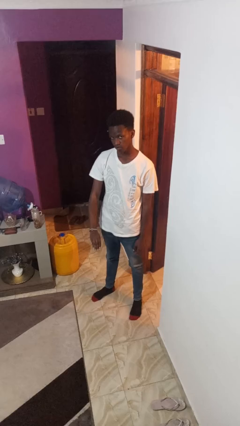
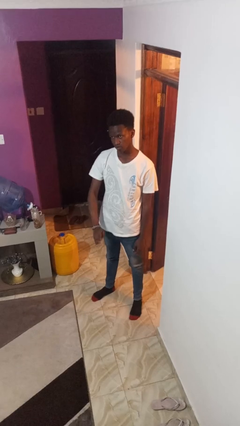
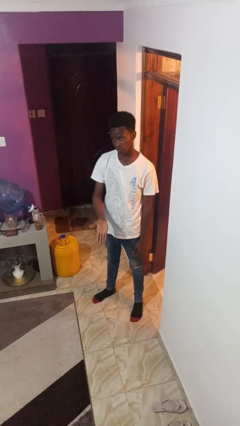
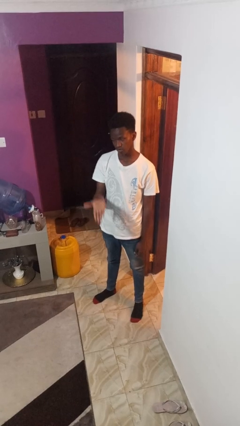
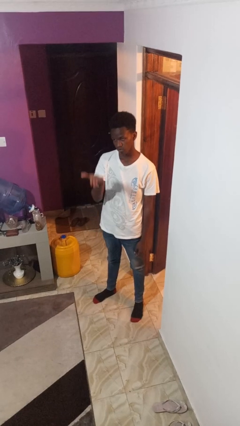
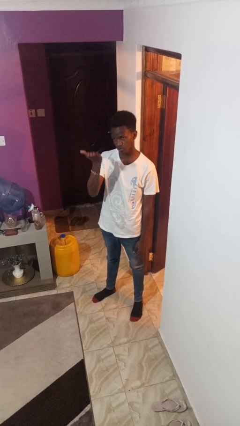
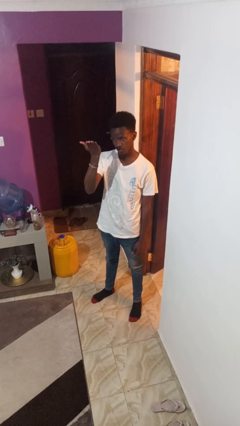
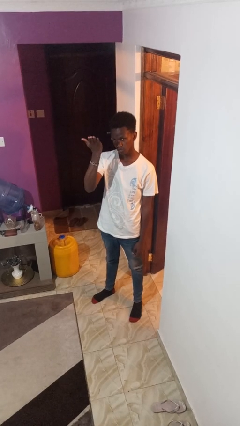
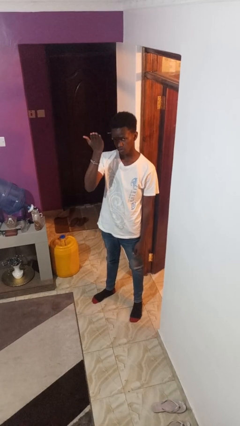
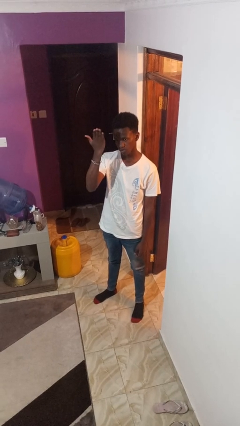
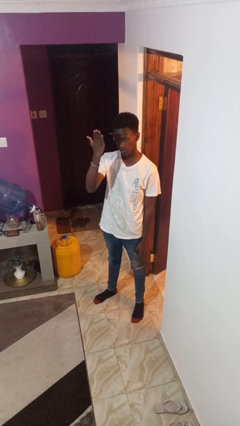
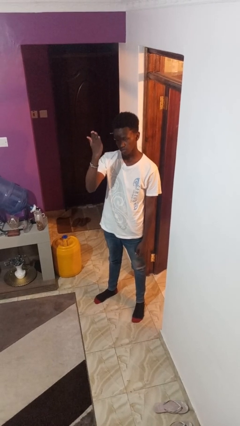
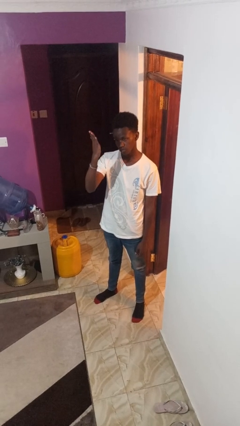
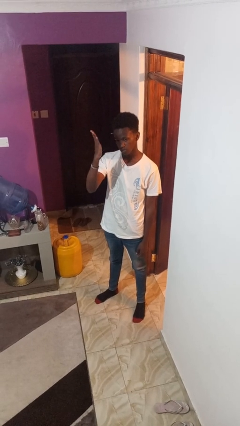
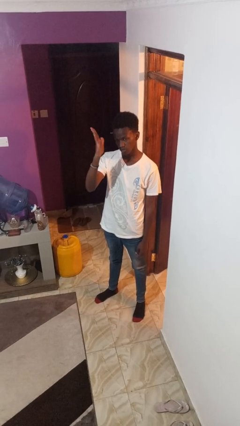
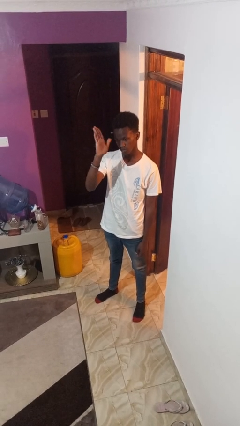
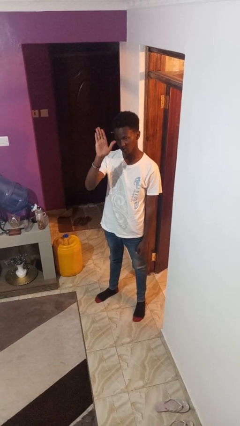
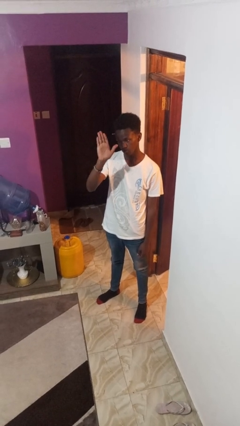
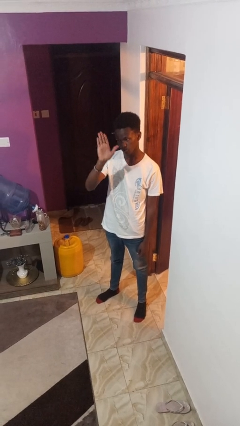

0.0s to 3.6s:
person gestures swipe up

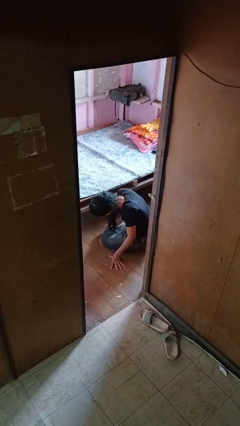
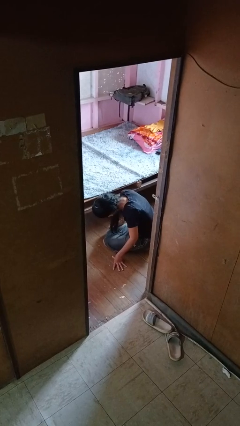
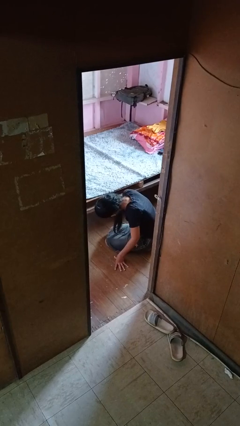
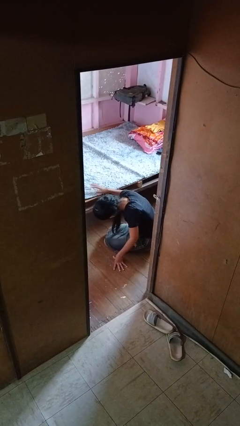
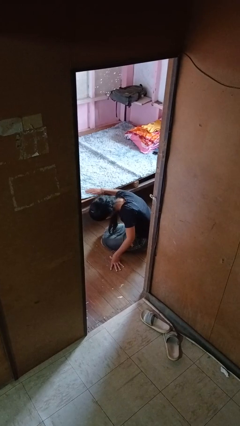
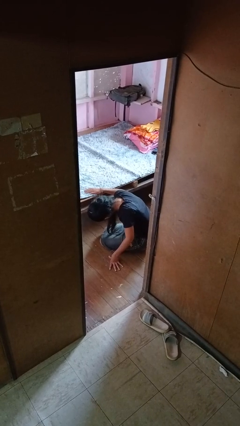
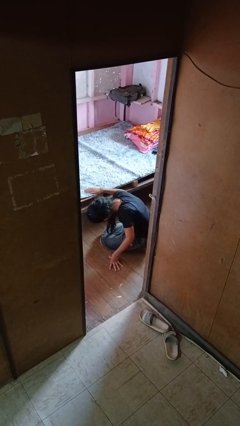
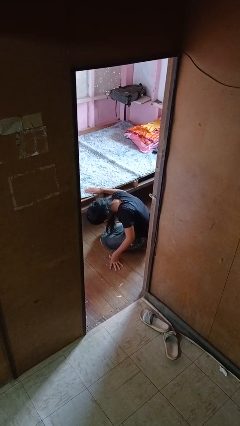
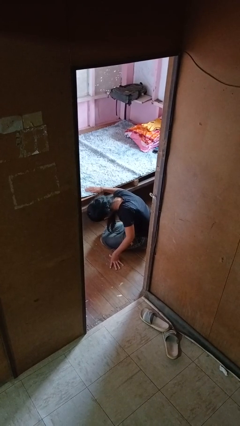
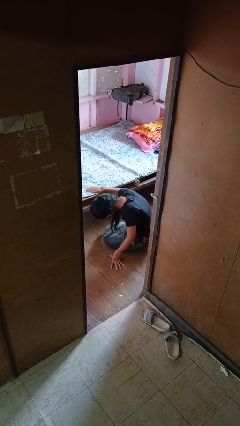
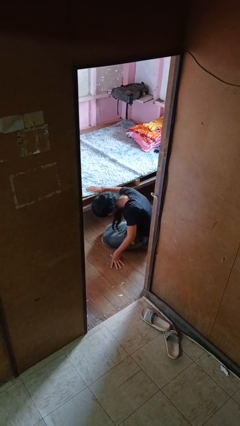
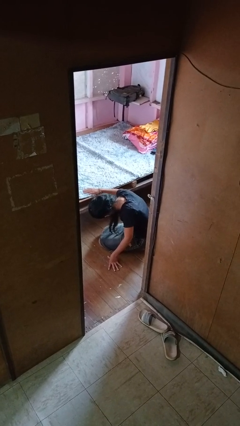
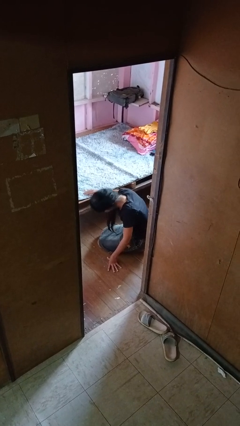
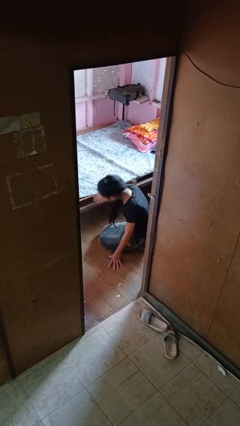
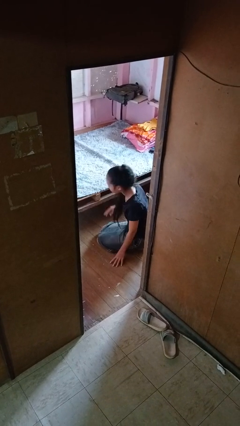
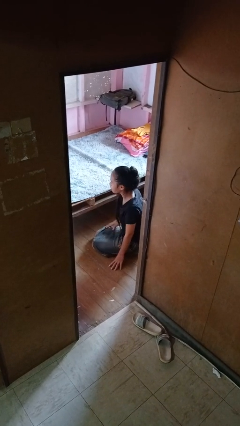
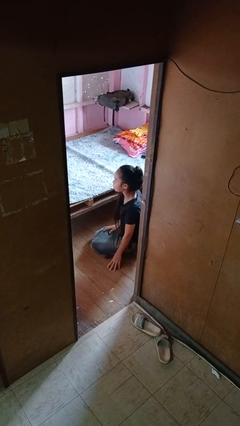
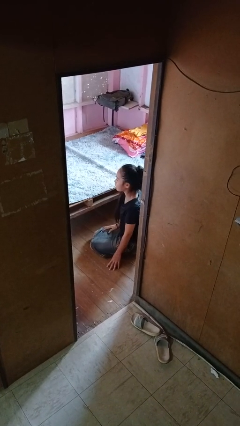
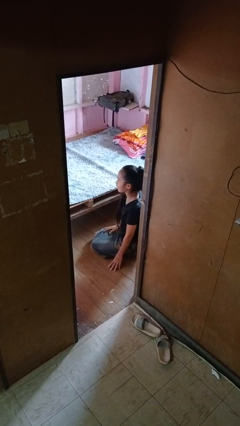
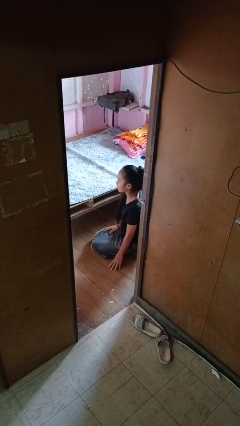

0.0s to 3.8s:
person searches under bed

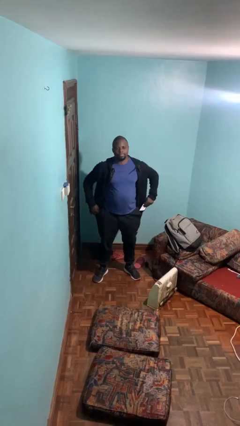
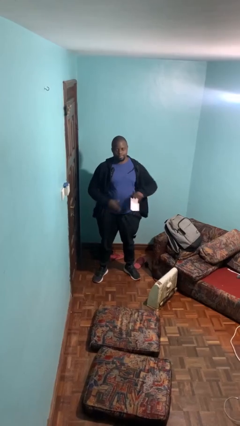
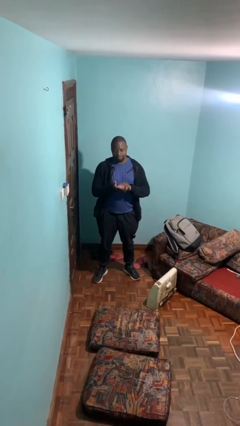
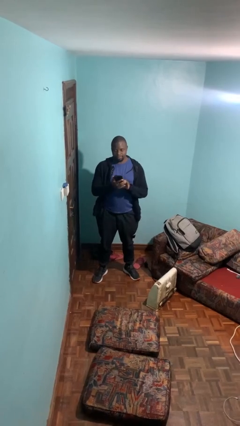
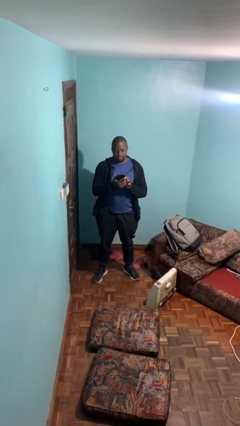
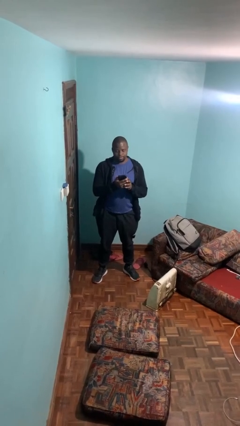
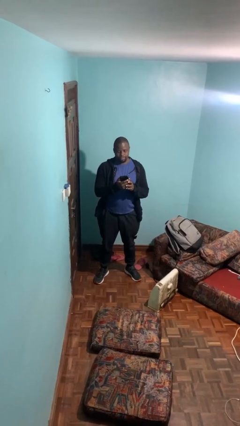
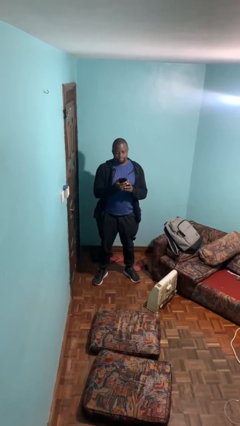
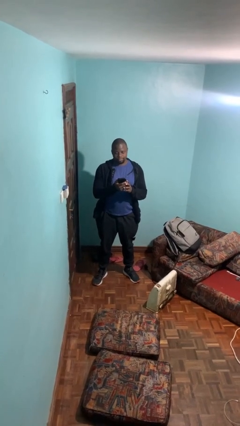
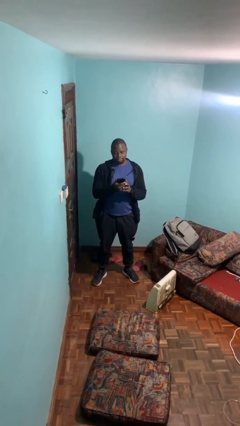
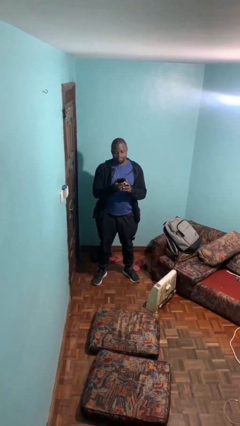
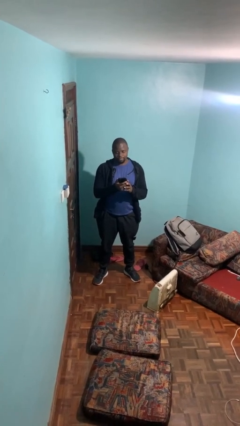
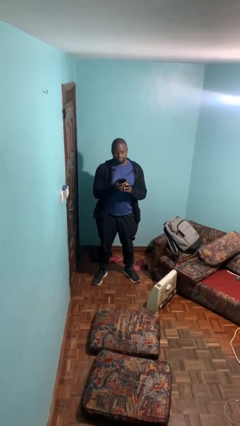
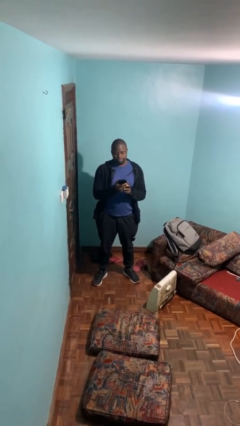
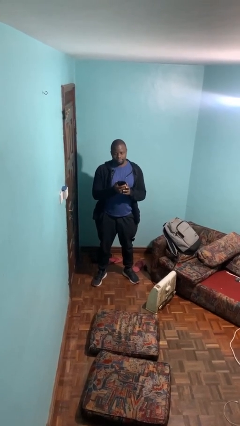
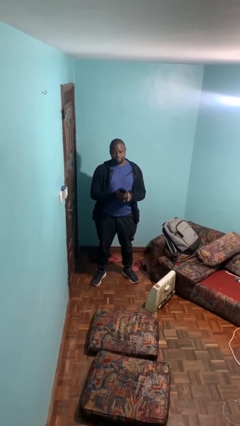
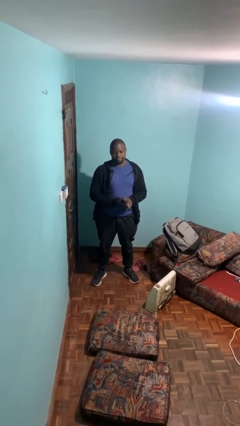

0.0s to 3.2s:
person takes phone from pocket

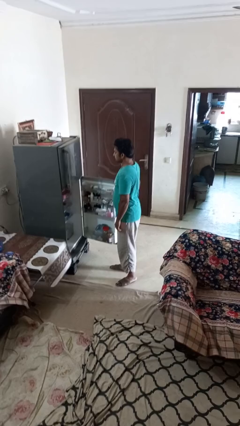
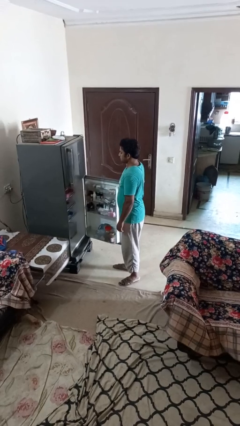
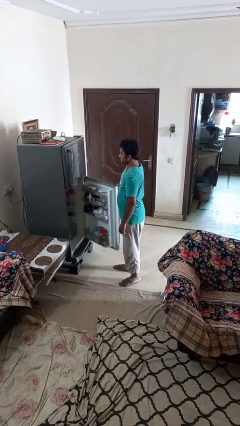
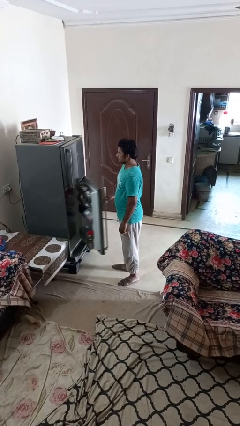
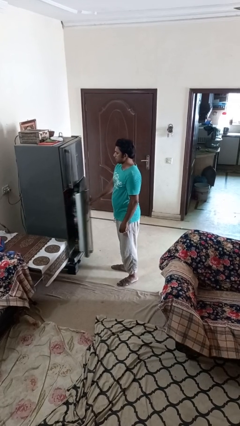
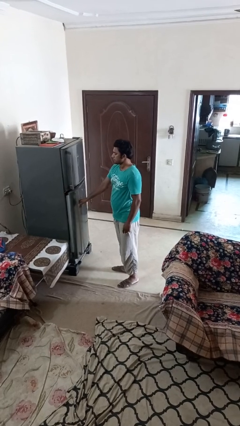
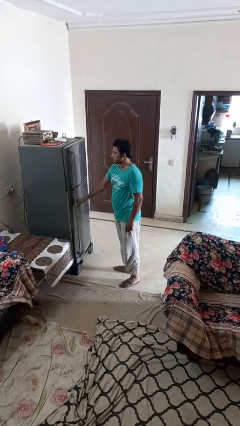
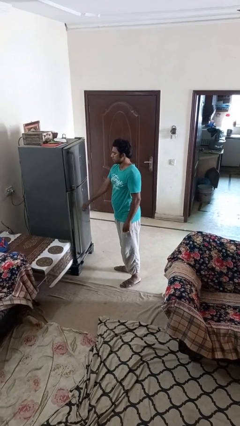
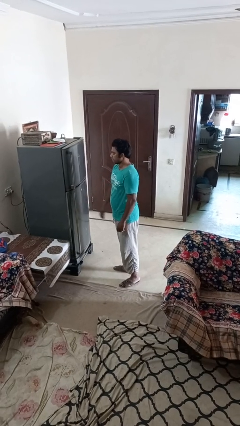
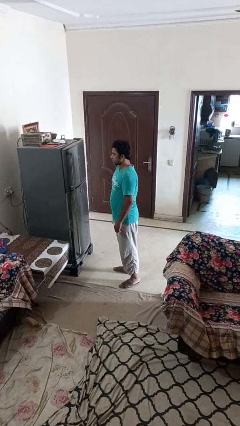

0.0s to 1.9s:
person closes refrigerator

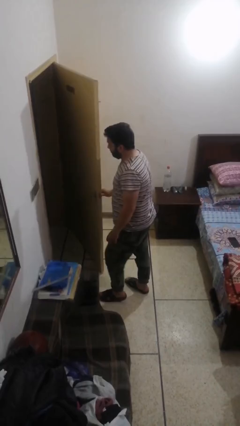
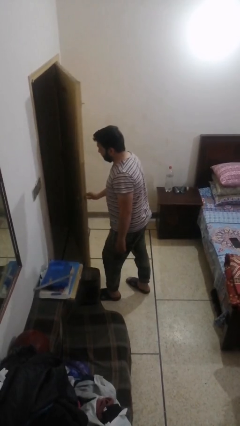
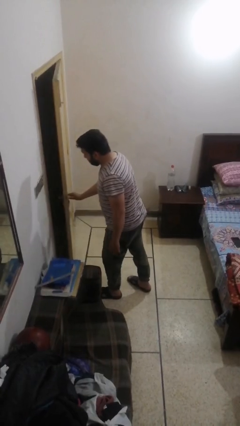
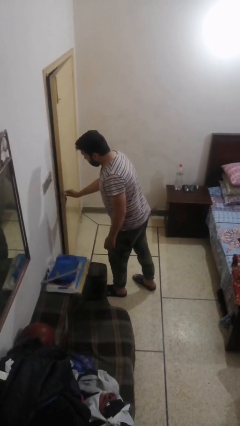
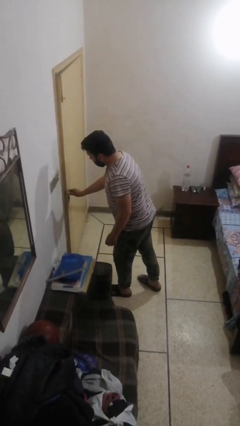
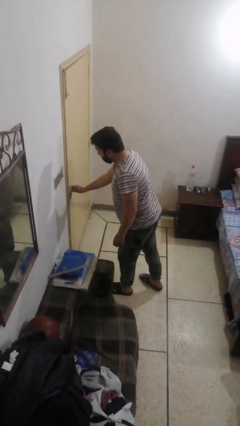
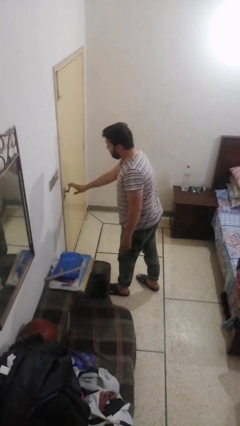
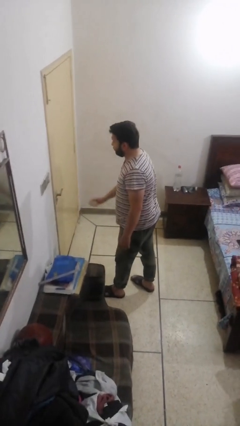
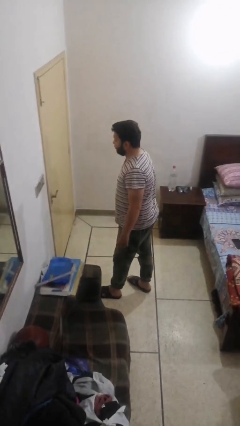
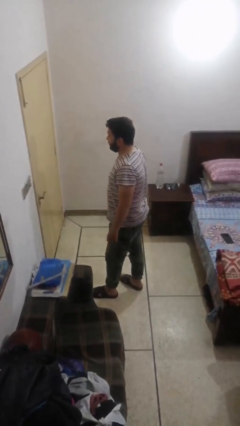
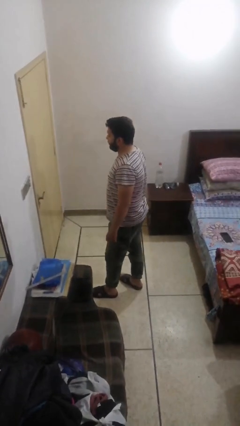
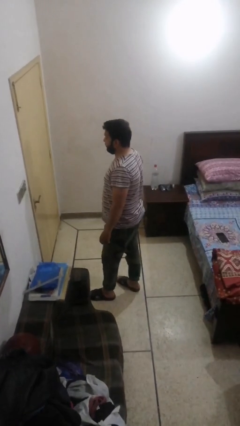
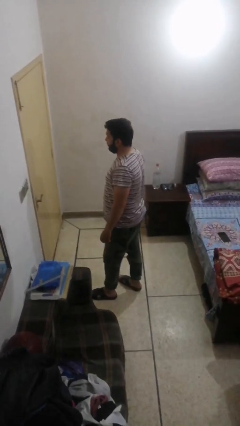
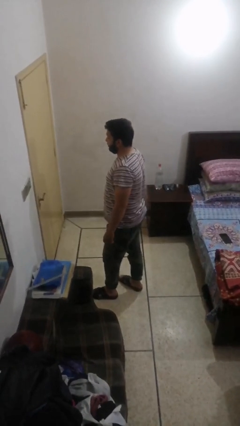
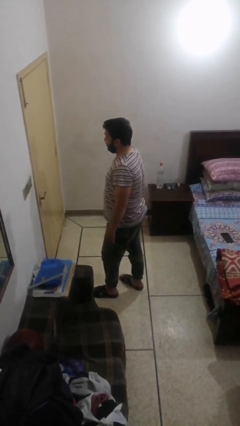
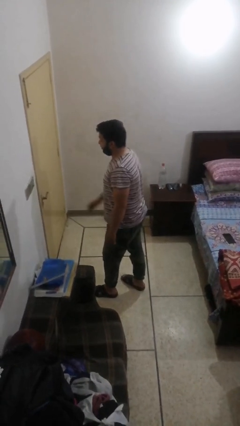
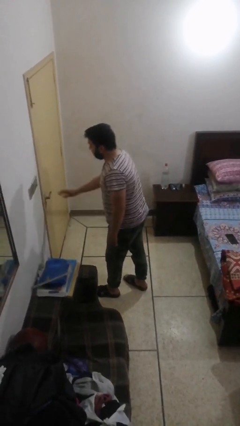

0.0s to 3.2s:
person opens facility door

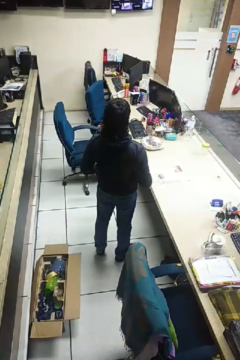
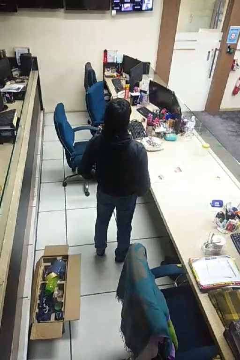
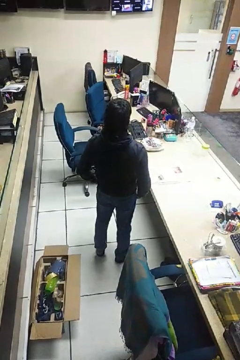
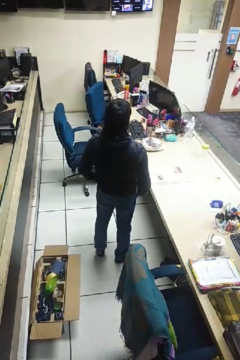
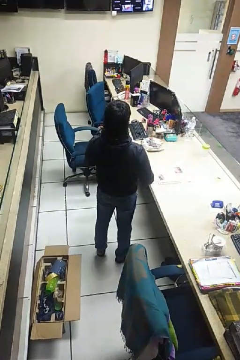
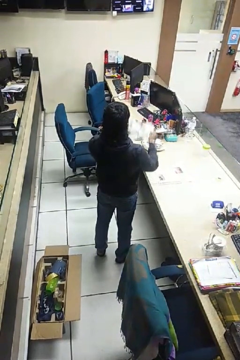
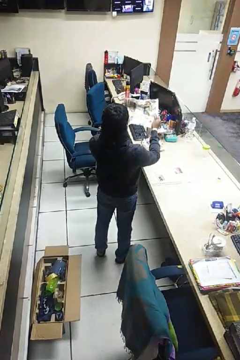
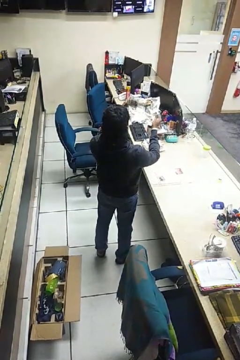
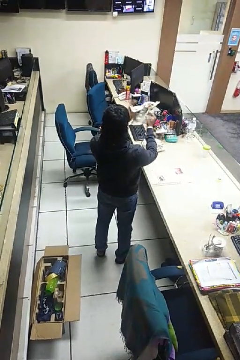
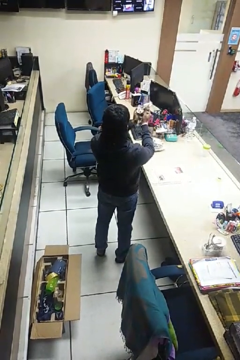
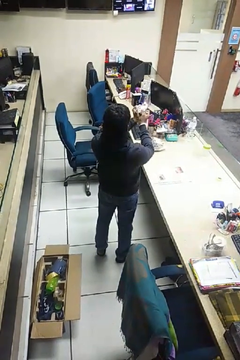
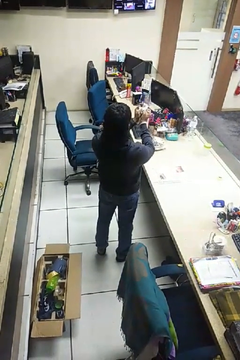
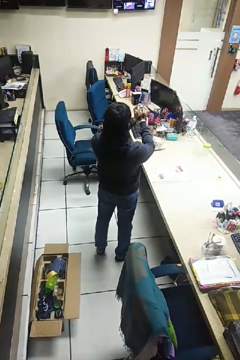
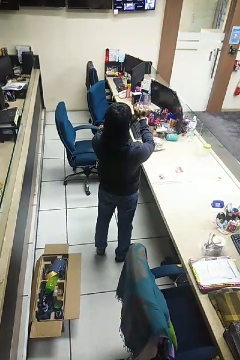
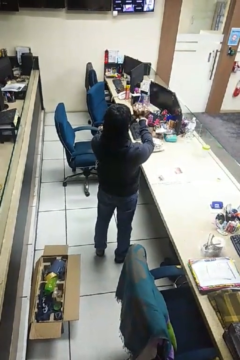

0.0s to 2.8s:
person crumples paper
